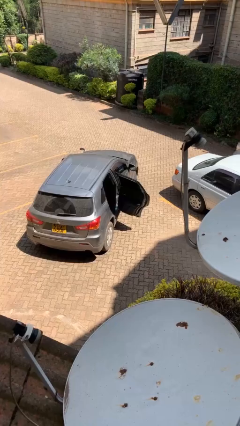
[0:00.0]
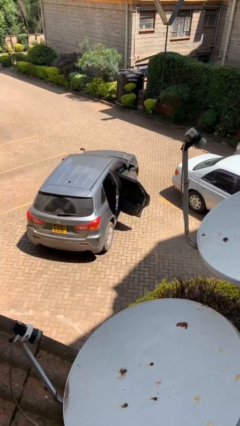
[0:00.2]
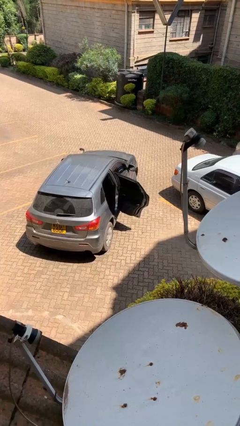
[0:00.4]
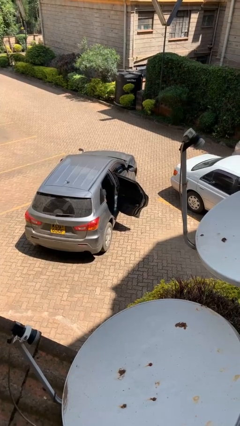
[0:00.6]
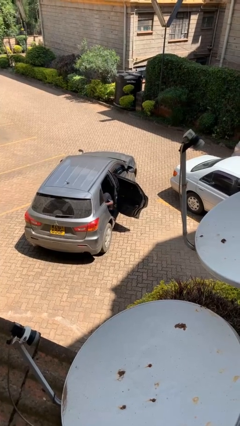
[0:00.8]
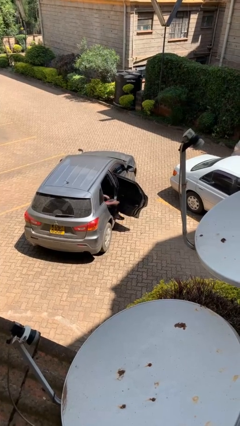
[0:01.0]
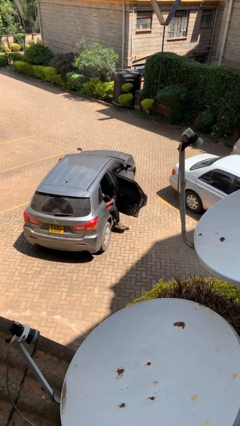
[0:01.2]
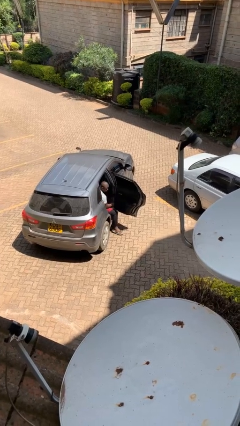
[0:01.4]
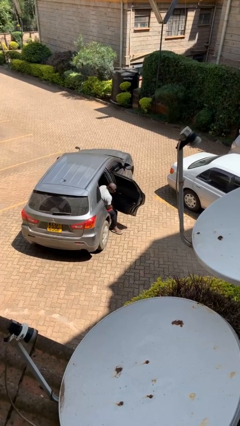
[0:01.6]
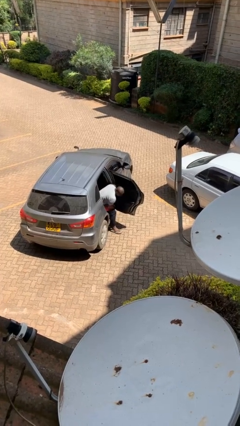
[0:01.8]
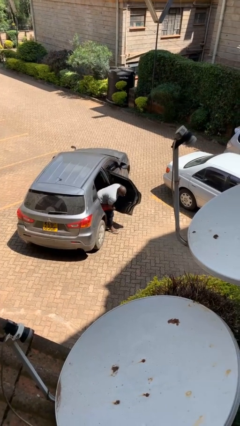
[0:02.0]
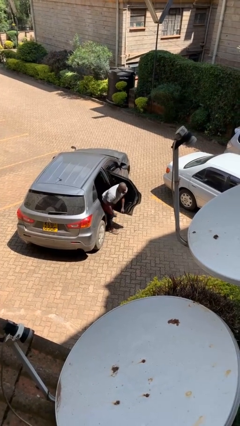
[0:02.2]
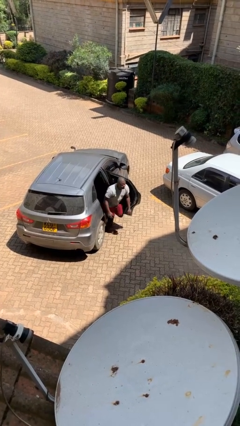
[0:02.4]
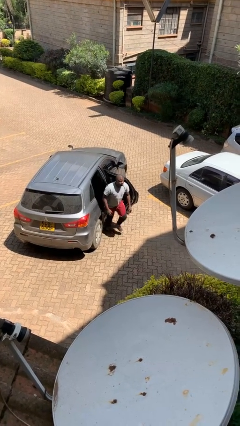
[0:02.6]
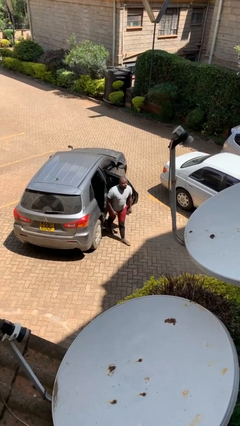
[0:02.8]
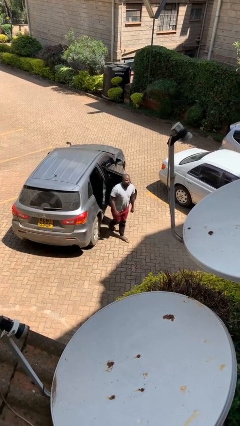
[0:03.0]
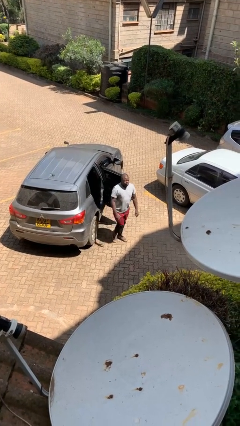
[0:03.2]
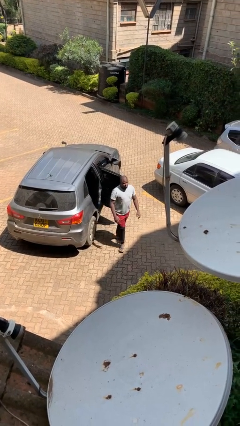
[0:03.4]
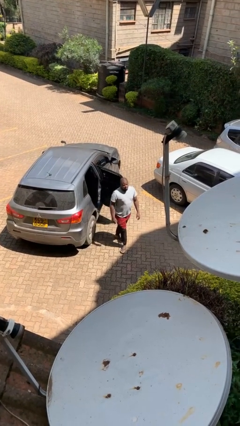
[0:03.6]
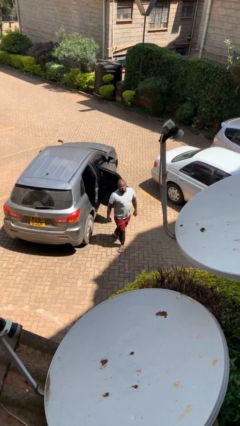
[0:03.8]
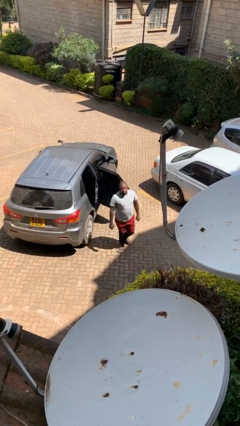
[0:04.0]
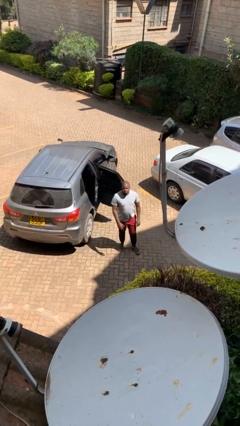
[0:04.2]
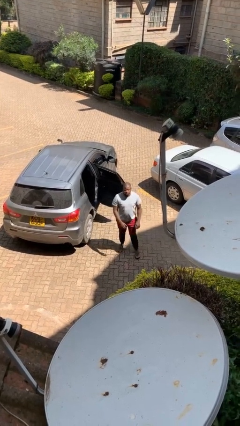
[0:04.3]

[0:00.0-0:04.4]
person exits car

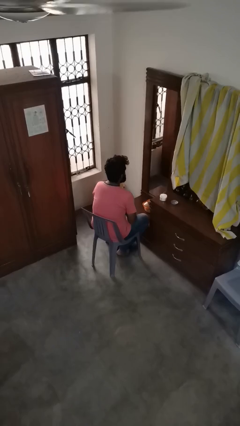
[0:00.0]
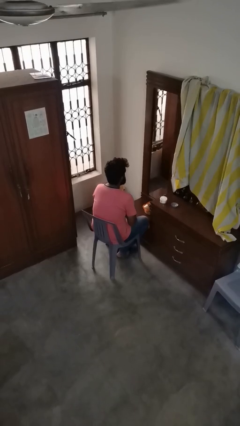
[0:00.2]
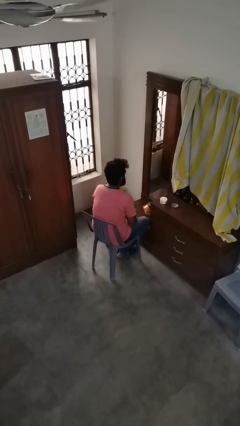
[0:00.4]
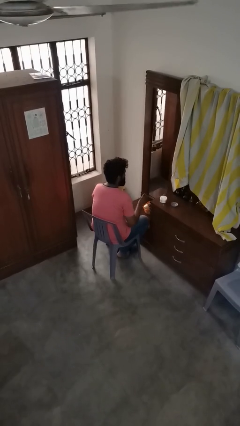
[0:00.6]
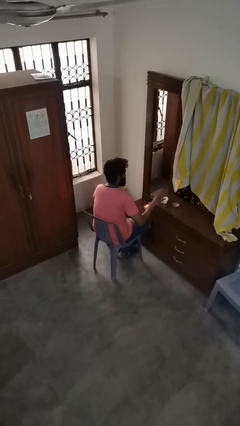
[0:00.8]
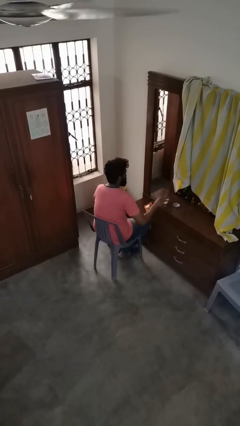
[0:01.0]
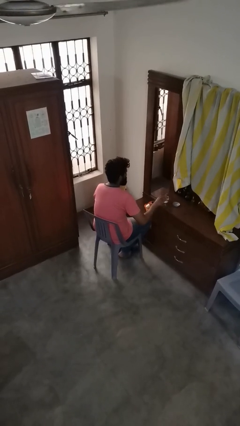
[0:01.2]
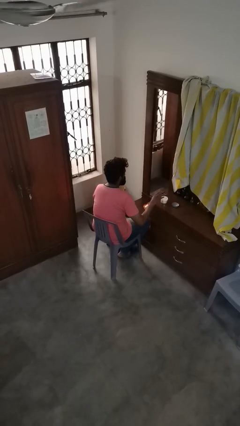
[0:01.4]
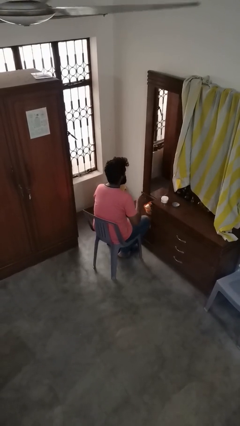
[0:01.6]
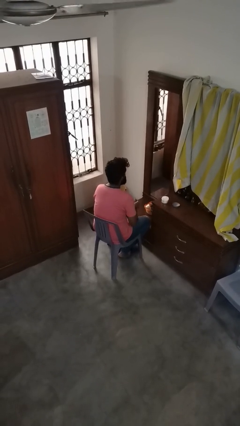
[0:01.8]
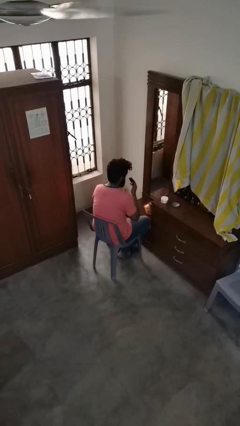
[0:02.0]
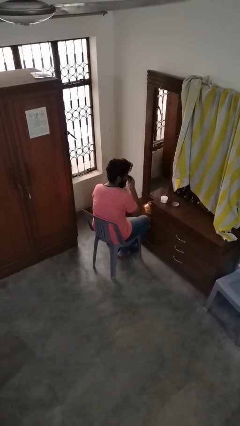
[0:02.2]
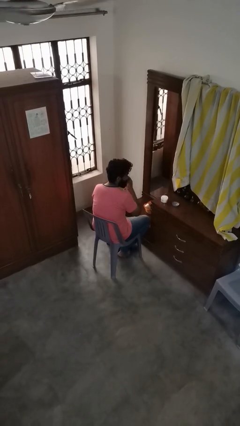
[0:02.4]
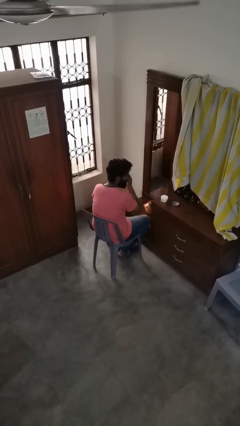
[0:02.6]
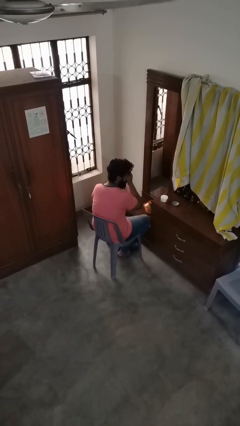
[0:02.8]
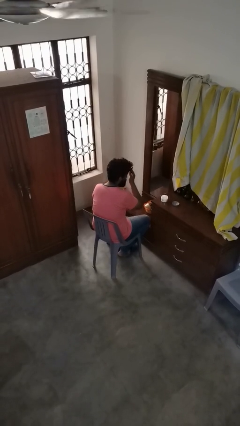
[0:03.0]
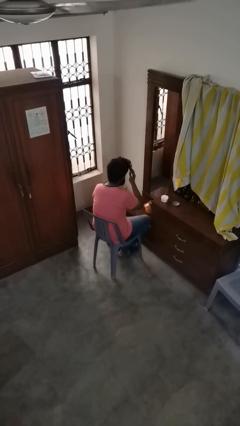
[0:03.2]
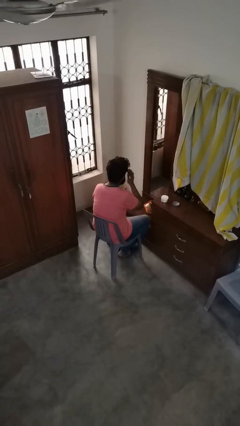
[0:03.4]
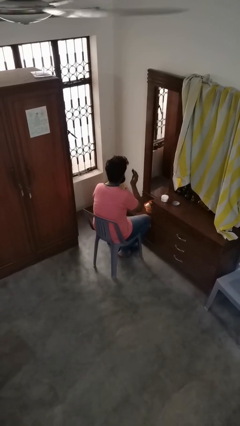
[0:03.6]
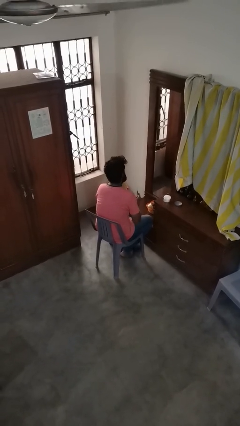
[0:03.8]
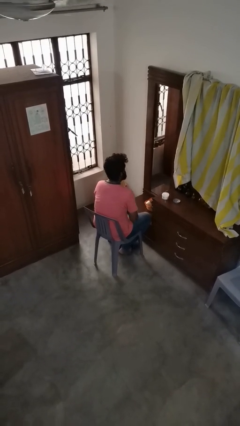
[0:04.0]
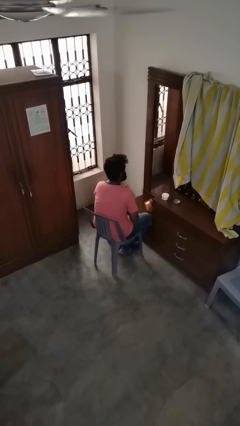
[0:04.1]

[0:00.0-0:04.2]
person applies foundation makeup

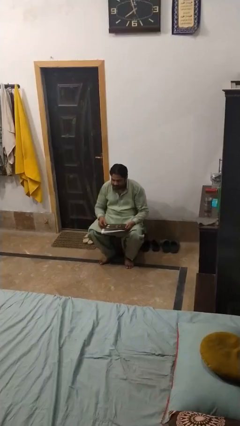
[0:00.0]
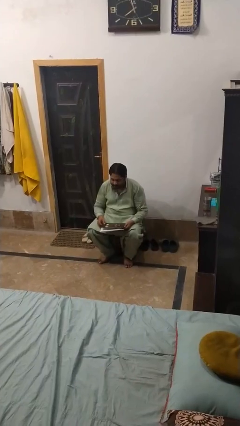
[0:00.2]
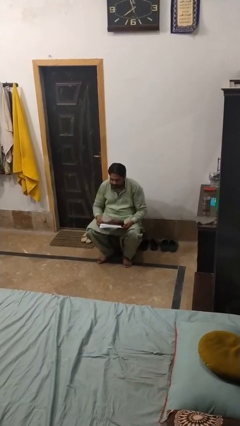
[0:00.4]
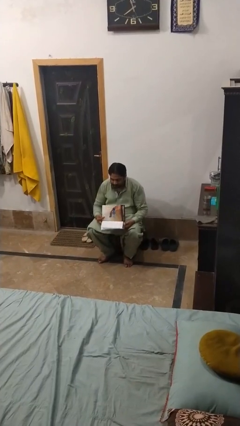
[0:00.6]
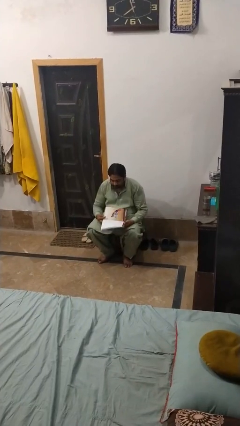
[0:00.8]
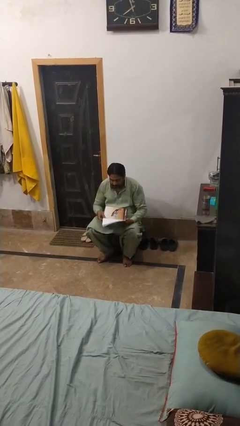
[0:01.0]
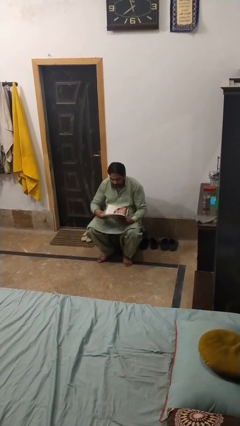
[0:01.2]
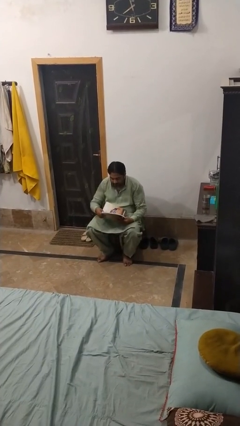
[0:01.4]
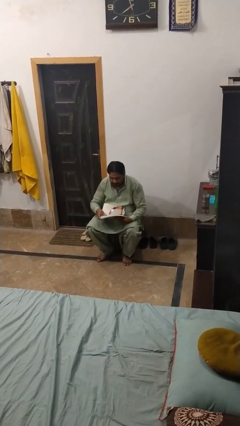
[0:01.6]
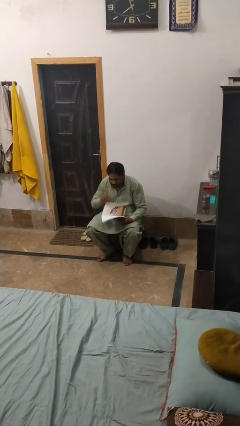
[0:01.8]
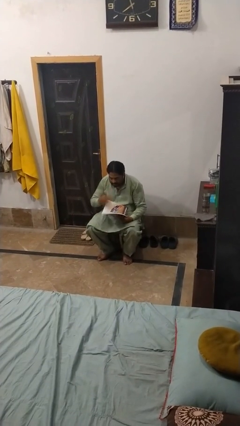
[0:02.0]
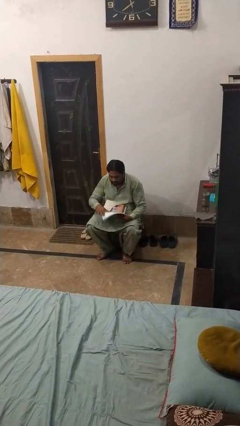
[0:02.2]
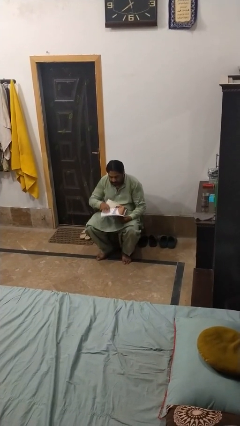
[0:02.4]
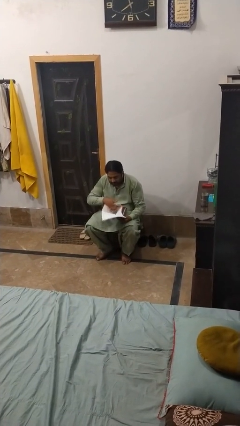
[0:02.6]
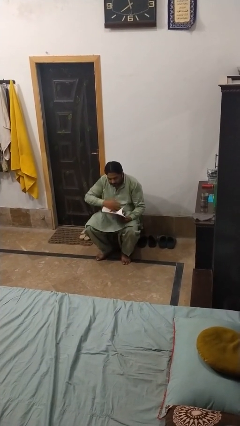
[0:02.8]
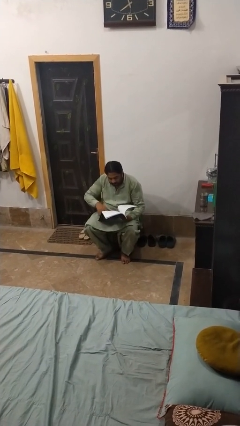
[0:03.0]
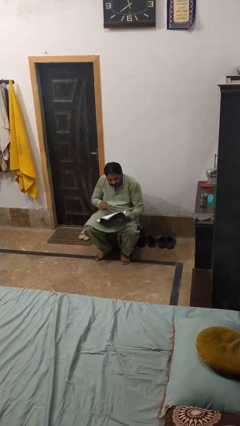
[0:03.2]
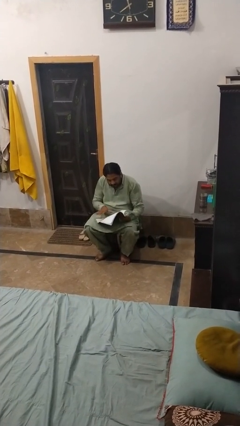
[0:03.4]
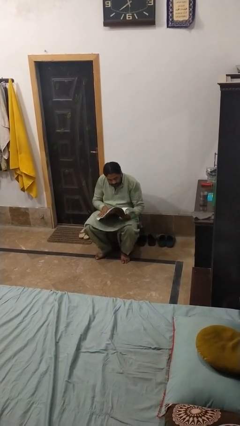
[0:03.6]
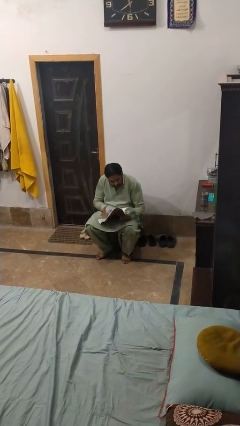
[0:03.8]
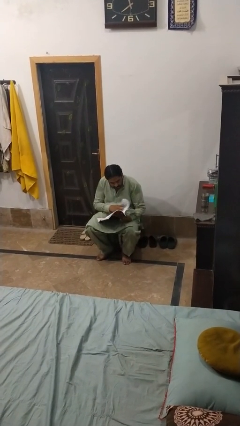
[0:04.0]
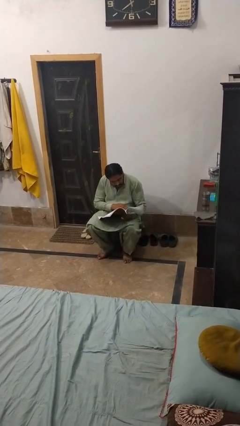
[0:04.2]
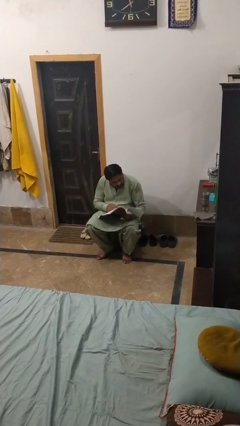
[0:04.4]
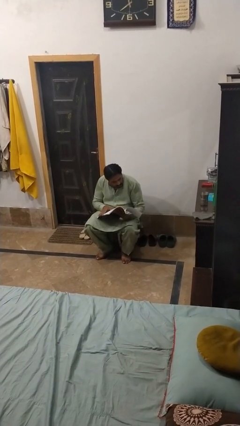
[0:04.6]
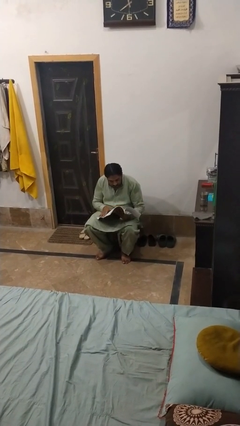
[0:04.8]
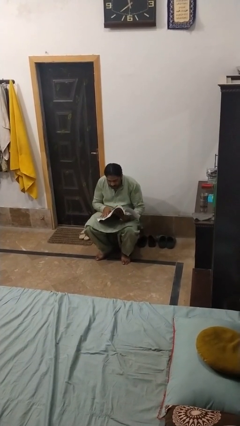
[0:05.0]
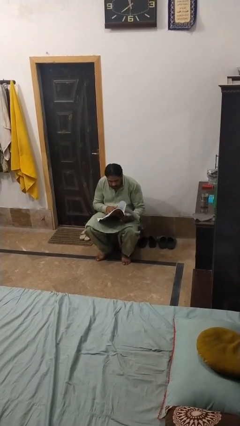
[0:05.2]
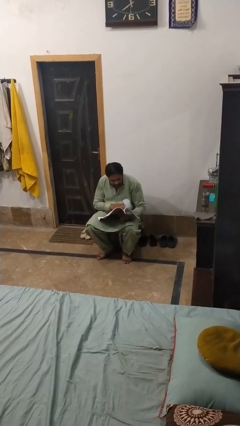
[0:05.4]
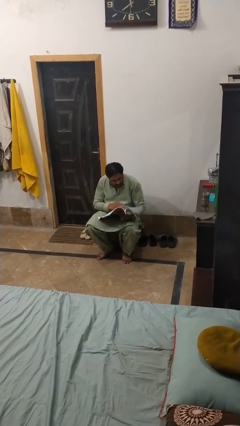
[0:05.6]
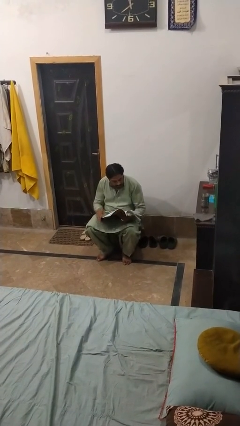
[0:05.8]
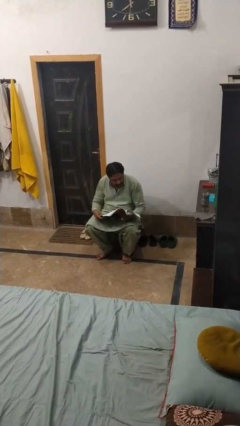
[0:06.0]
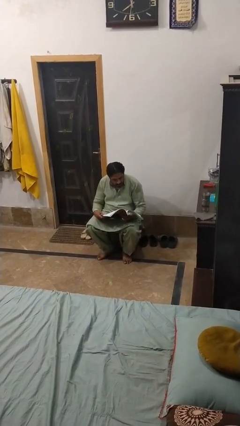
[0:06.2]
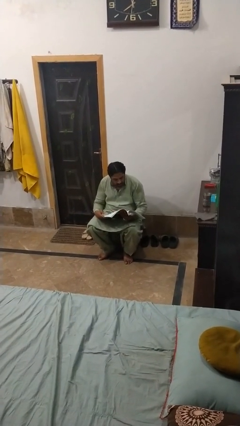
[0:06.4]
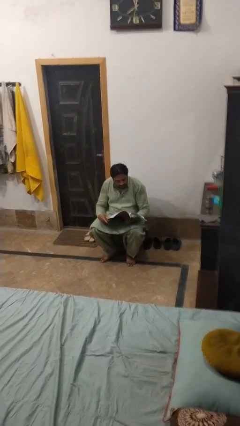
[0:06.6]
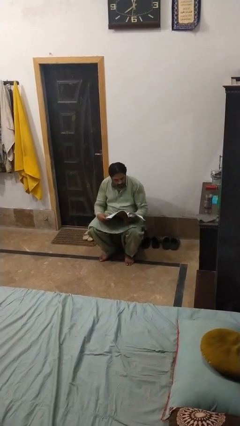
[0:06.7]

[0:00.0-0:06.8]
person reads book

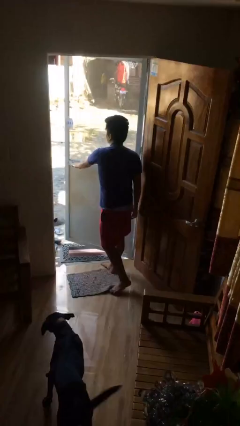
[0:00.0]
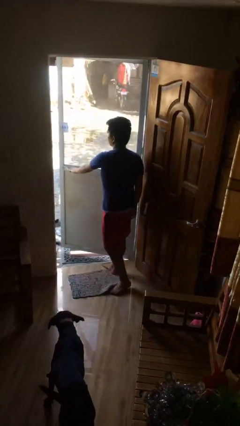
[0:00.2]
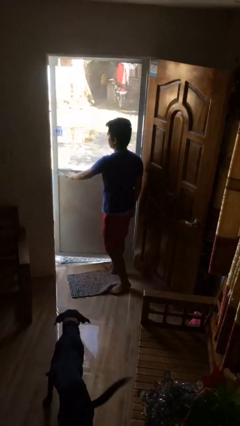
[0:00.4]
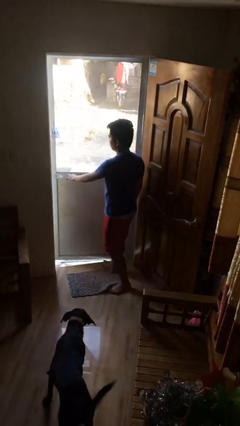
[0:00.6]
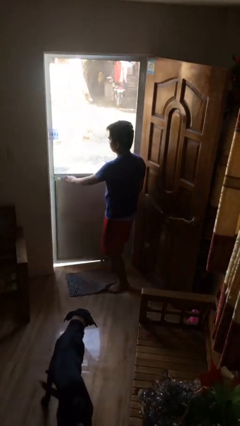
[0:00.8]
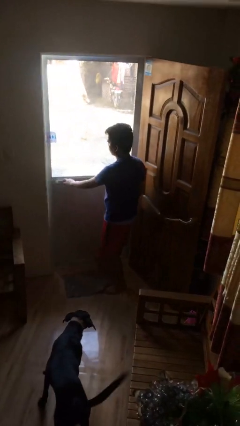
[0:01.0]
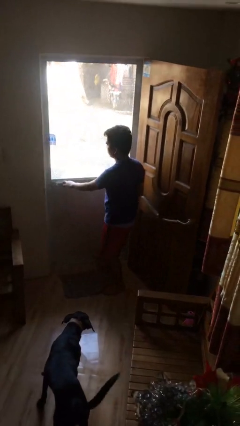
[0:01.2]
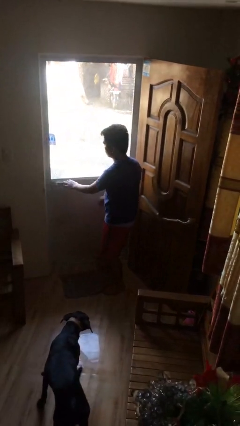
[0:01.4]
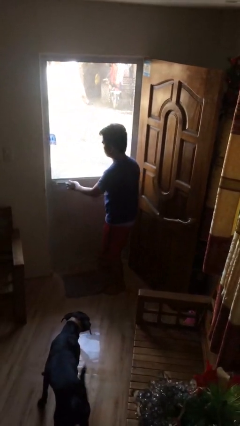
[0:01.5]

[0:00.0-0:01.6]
person closes facility door

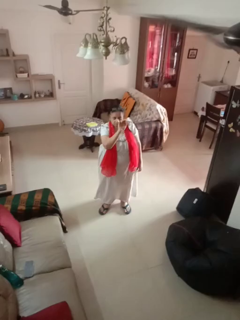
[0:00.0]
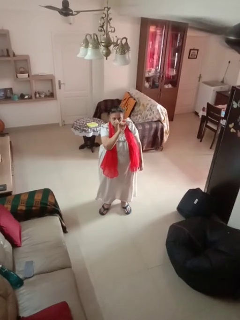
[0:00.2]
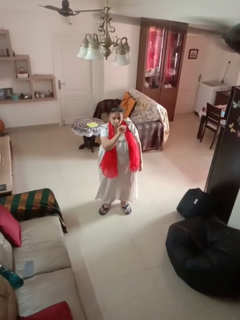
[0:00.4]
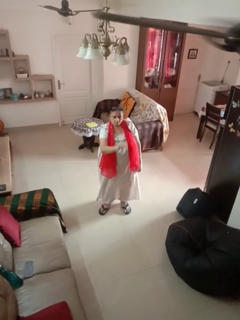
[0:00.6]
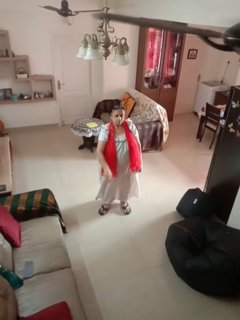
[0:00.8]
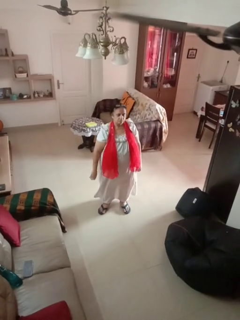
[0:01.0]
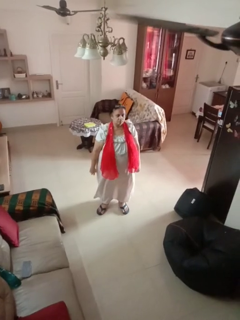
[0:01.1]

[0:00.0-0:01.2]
person gestures come here
